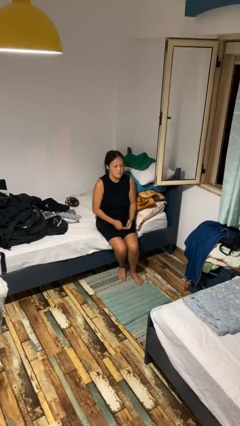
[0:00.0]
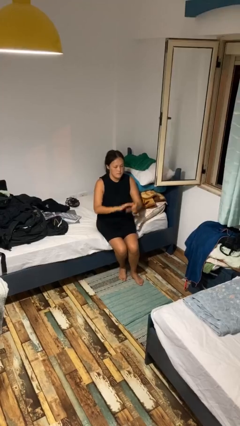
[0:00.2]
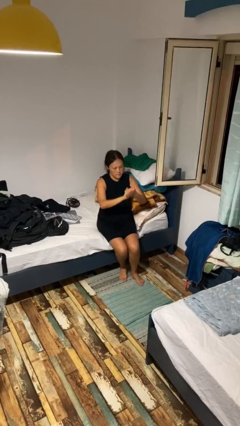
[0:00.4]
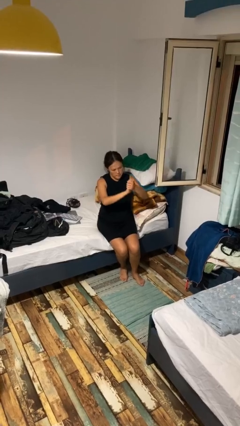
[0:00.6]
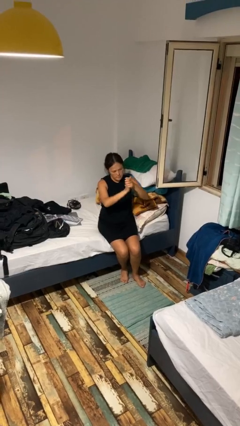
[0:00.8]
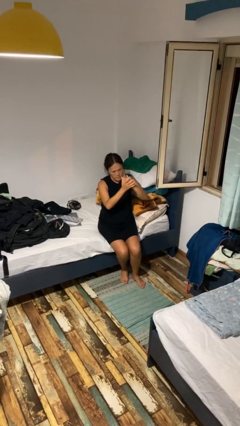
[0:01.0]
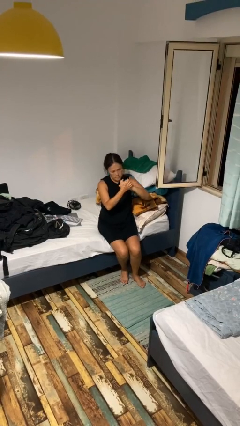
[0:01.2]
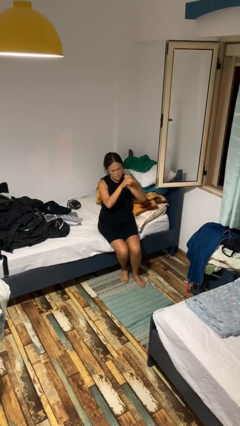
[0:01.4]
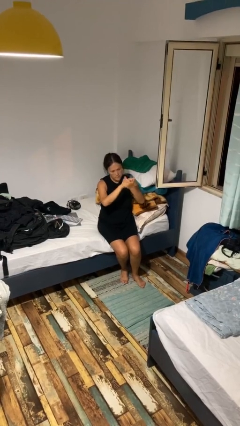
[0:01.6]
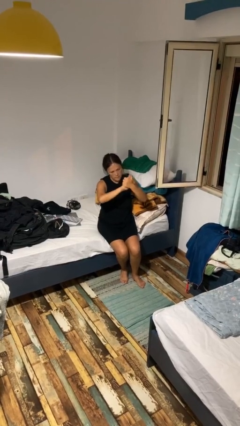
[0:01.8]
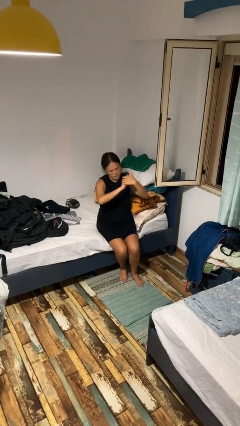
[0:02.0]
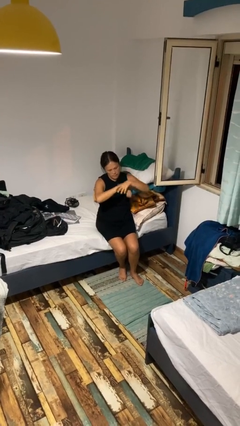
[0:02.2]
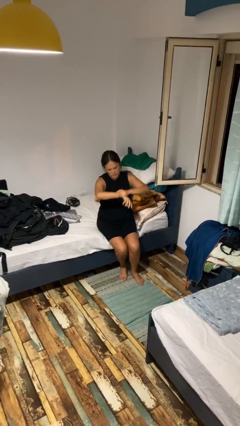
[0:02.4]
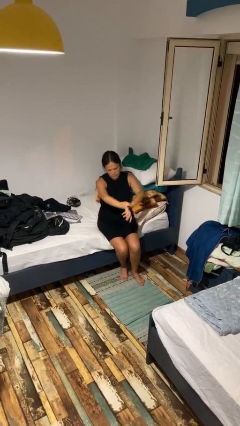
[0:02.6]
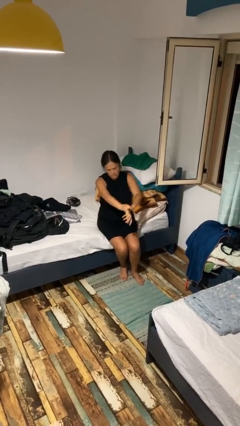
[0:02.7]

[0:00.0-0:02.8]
person cracks knuckles

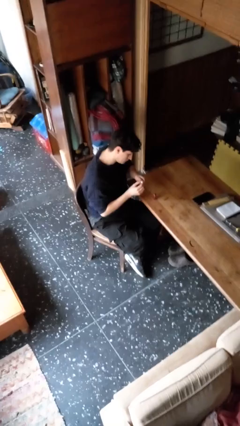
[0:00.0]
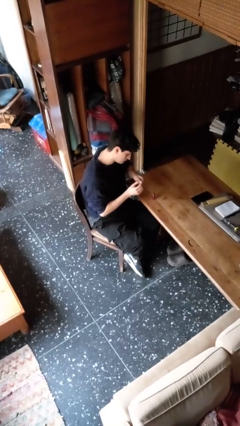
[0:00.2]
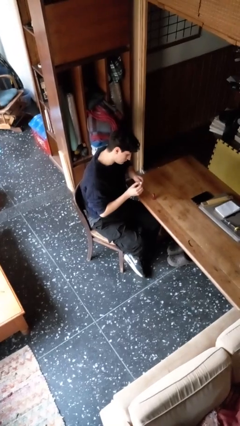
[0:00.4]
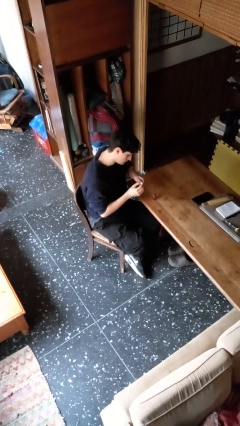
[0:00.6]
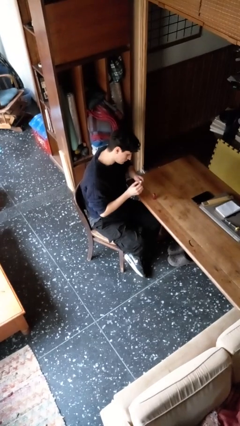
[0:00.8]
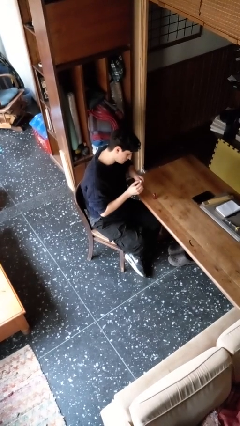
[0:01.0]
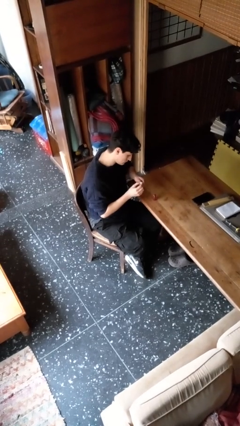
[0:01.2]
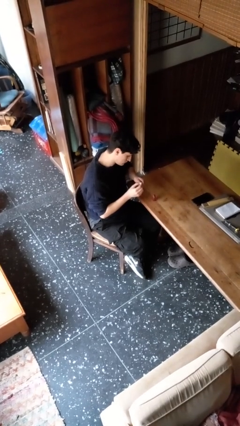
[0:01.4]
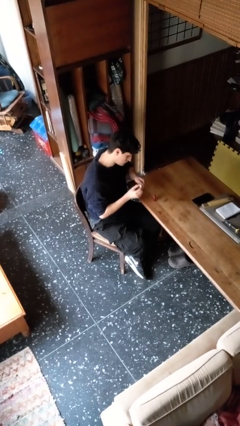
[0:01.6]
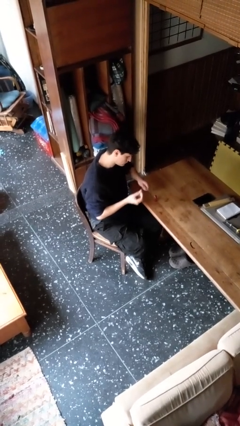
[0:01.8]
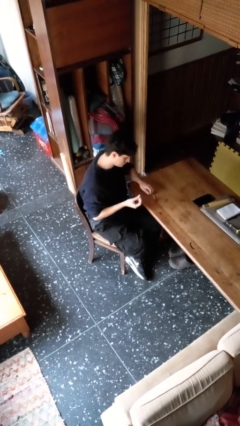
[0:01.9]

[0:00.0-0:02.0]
person paints fingernails

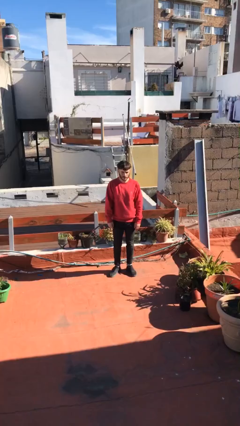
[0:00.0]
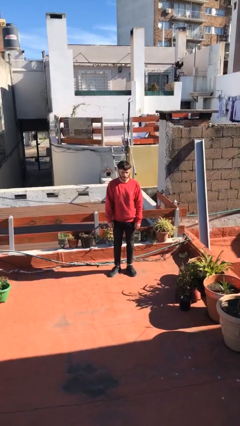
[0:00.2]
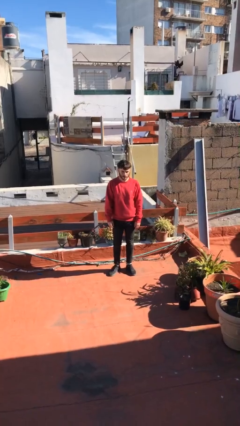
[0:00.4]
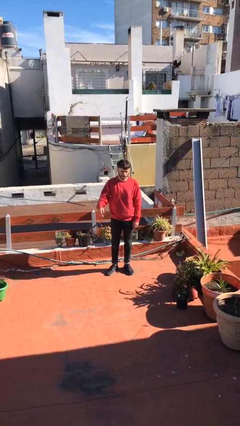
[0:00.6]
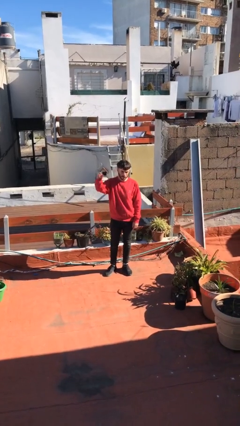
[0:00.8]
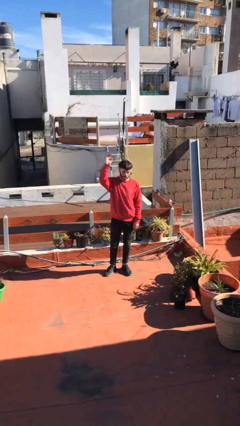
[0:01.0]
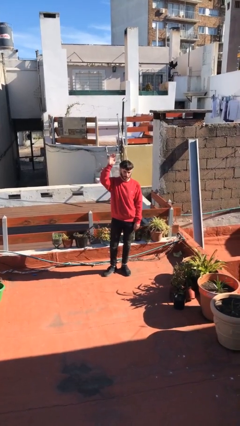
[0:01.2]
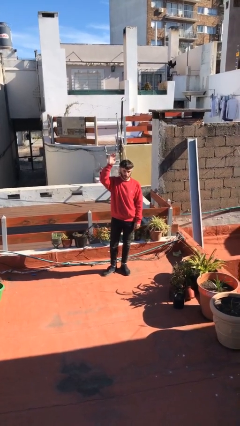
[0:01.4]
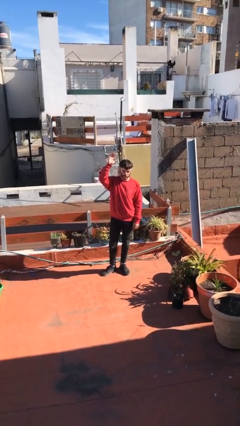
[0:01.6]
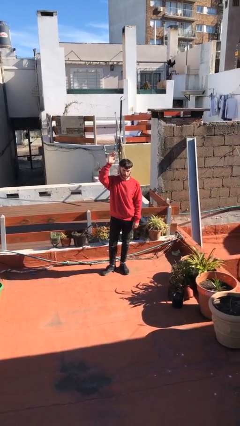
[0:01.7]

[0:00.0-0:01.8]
person gestures raise hand

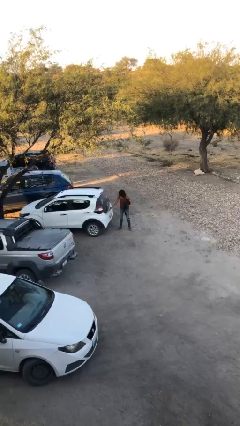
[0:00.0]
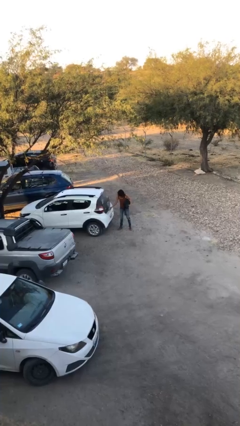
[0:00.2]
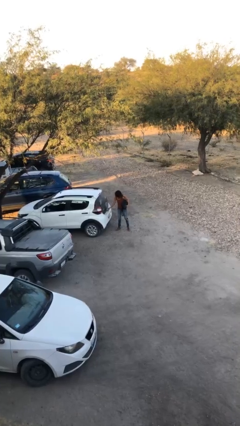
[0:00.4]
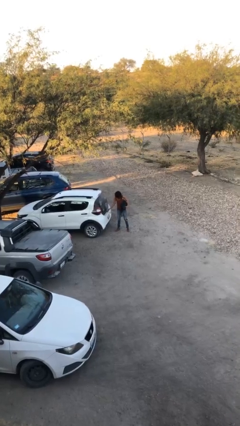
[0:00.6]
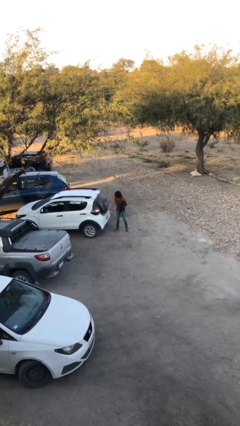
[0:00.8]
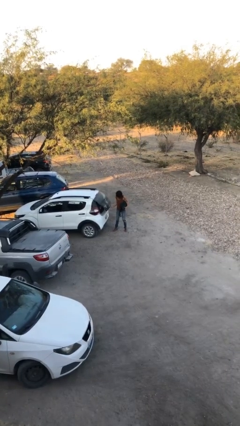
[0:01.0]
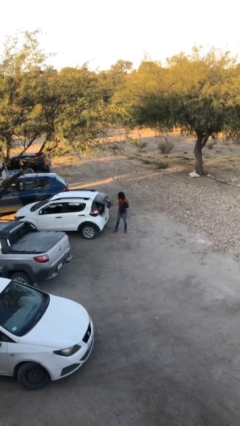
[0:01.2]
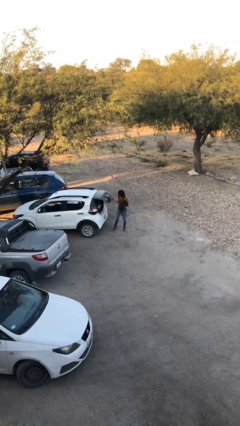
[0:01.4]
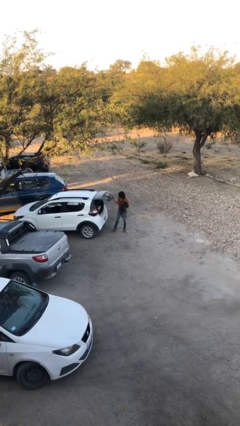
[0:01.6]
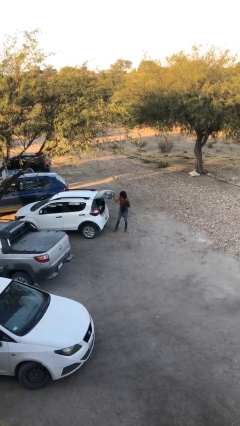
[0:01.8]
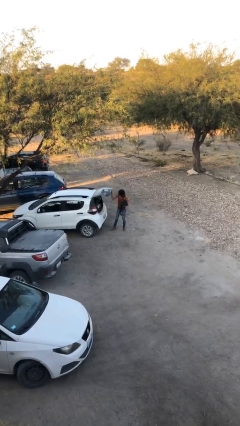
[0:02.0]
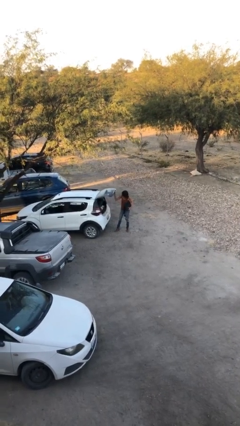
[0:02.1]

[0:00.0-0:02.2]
person opens car trunk

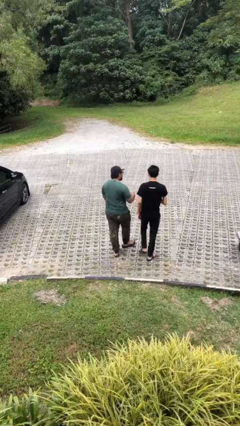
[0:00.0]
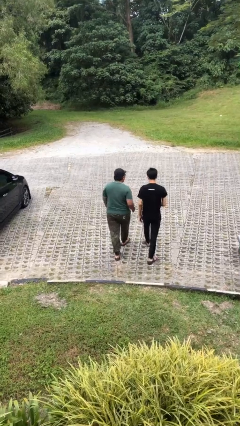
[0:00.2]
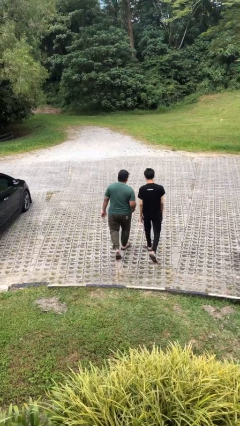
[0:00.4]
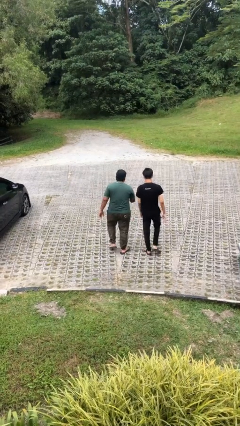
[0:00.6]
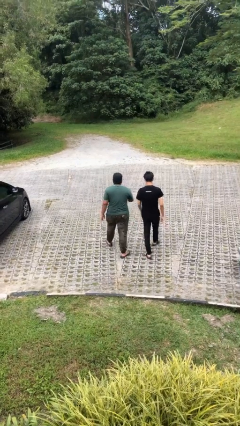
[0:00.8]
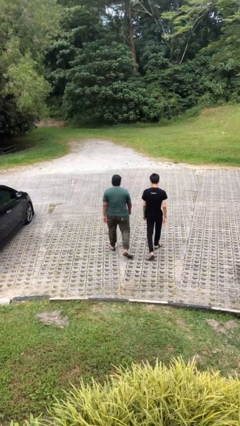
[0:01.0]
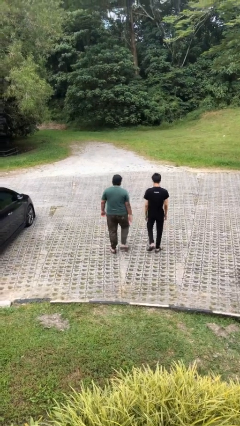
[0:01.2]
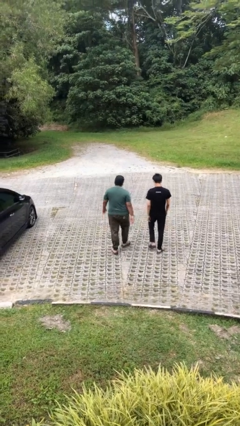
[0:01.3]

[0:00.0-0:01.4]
person talks to person

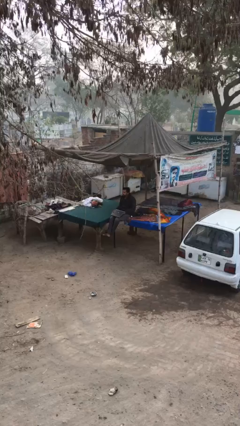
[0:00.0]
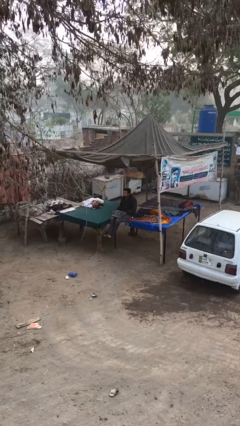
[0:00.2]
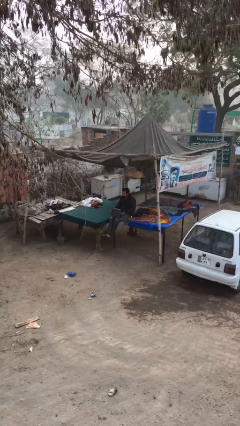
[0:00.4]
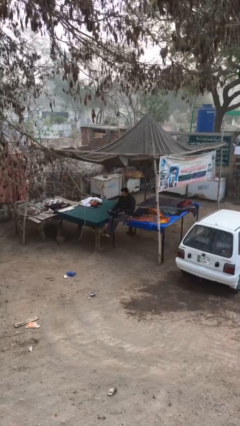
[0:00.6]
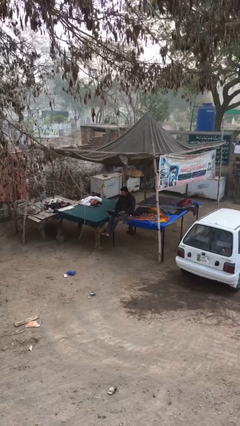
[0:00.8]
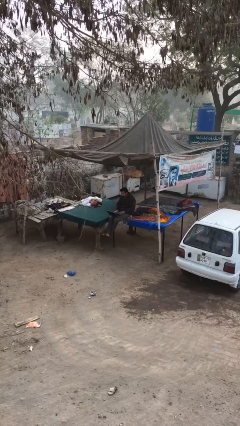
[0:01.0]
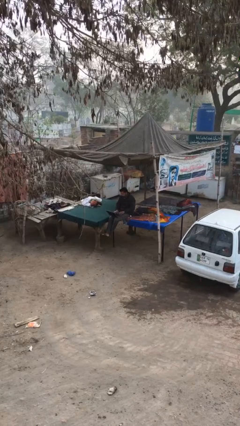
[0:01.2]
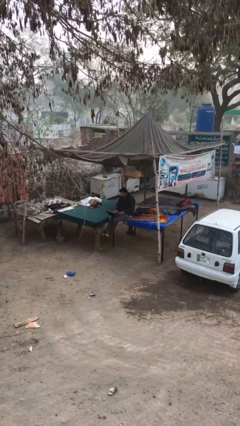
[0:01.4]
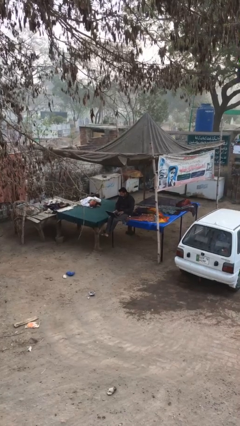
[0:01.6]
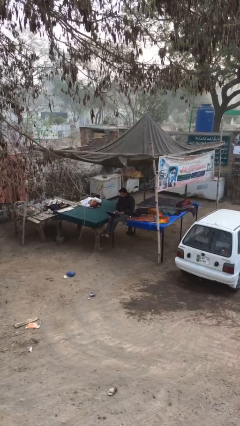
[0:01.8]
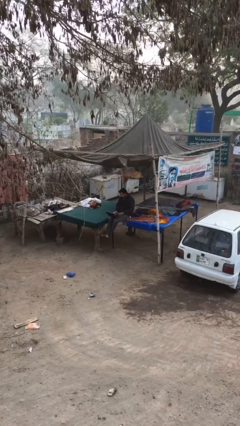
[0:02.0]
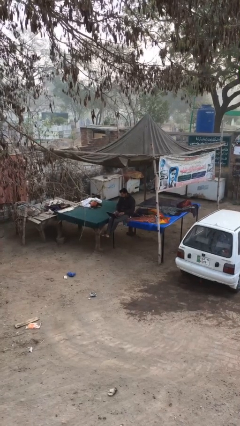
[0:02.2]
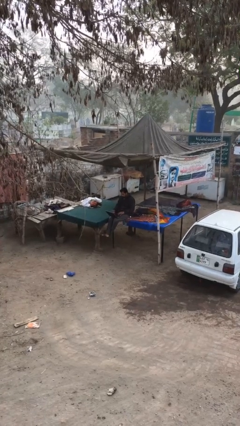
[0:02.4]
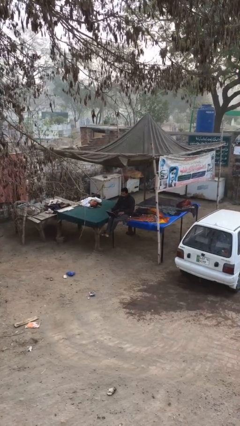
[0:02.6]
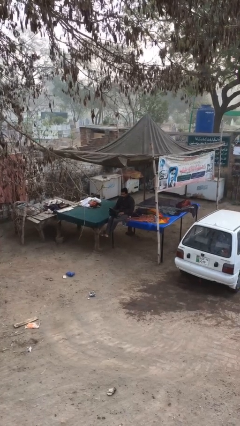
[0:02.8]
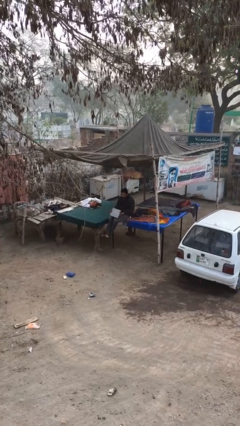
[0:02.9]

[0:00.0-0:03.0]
person interacts with laptop

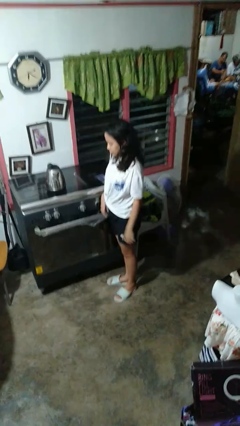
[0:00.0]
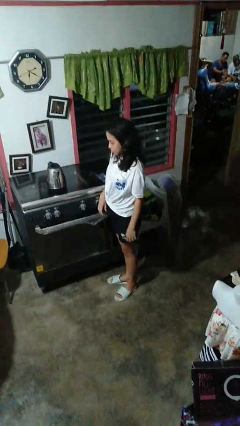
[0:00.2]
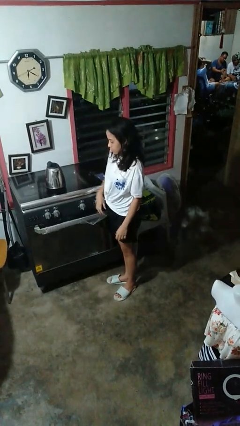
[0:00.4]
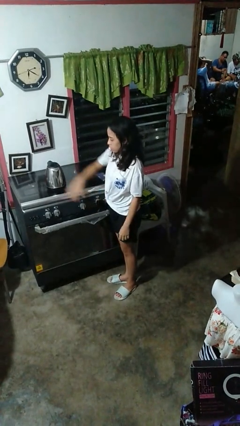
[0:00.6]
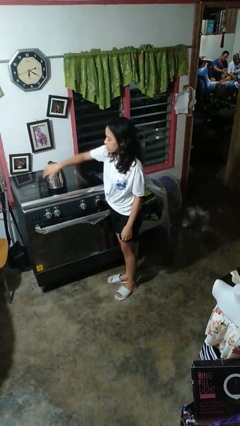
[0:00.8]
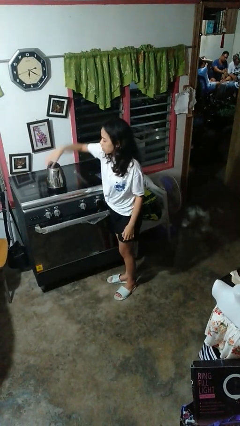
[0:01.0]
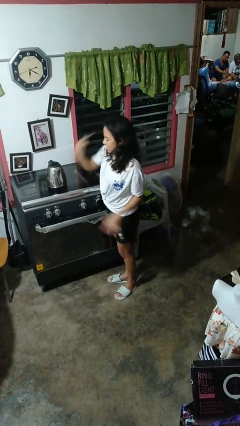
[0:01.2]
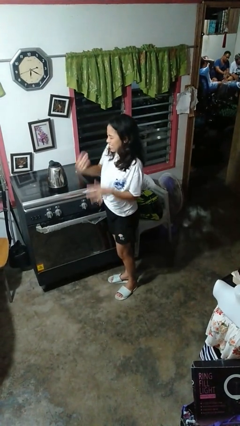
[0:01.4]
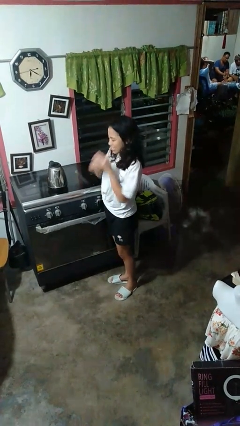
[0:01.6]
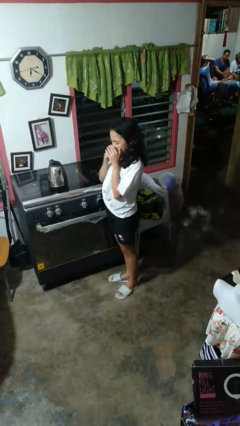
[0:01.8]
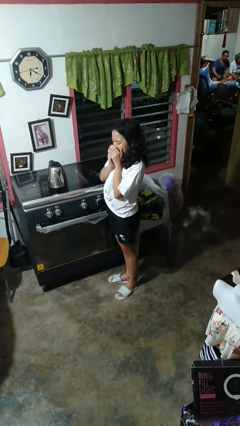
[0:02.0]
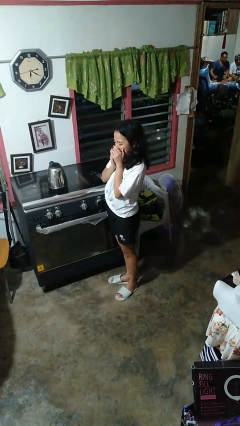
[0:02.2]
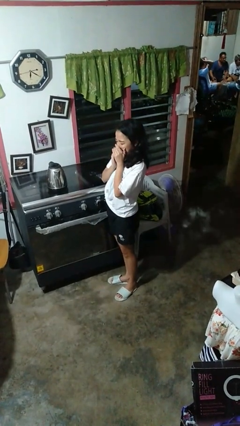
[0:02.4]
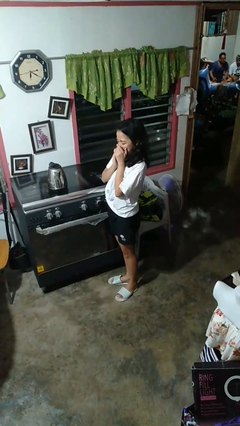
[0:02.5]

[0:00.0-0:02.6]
person burns hand
